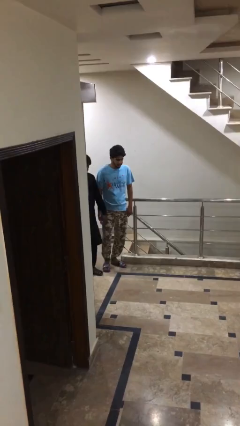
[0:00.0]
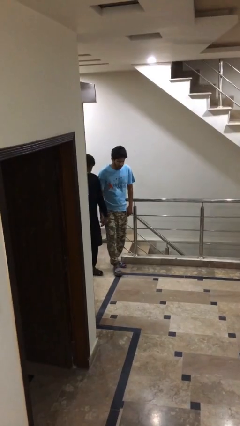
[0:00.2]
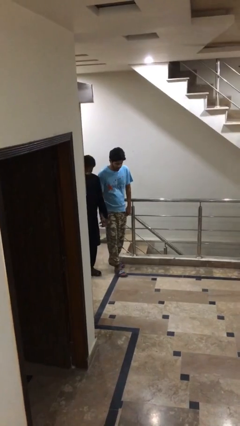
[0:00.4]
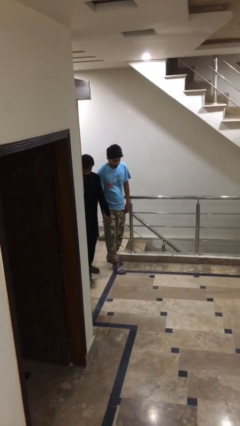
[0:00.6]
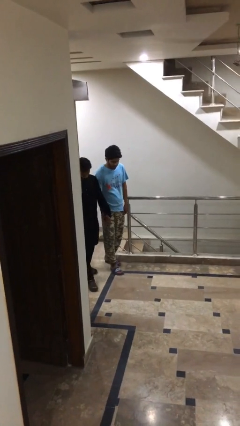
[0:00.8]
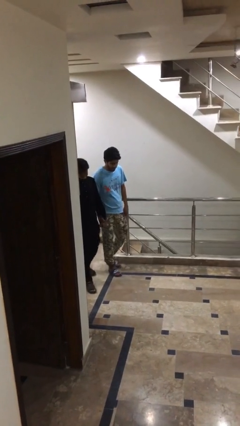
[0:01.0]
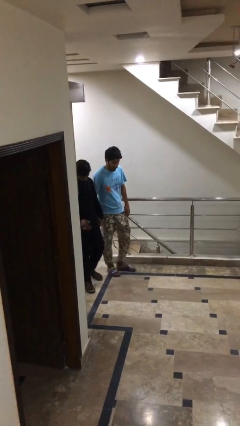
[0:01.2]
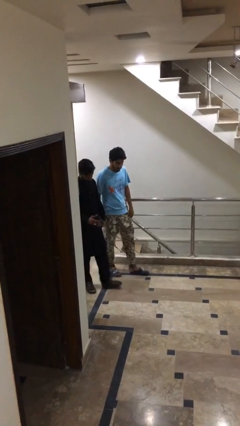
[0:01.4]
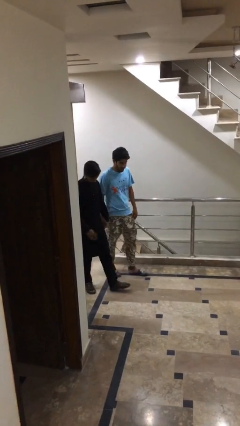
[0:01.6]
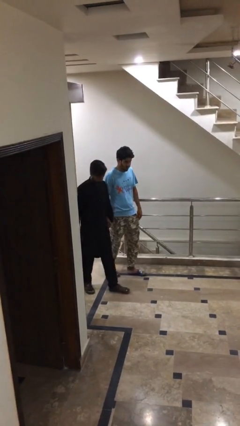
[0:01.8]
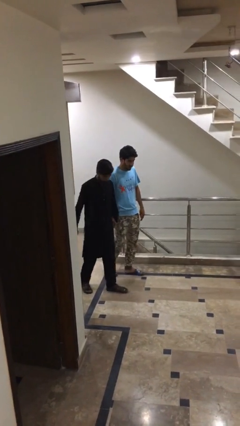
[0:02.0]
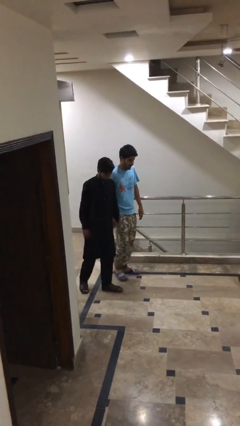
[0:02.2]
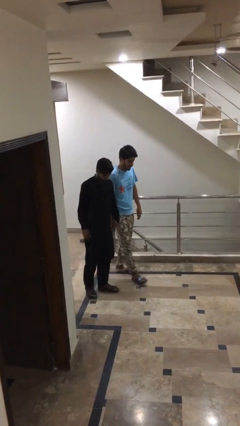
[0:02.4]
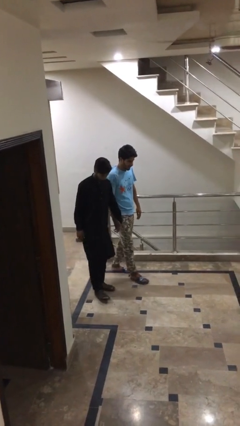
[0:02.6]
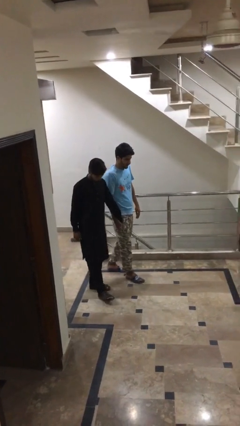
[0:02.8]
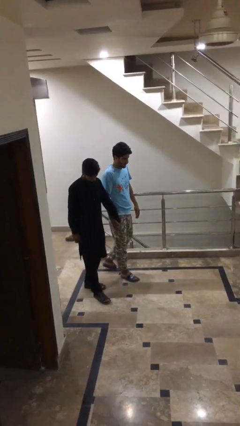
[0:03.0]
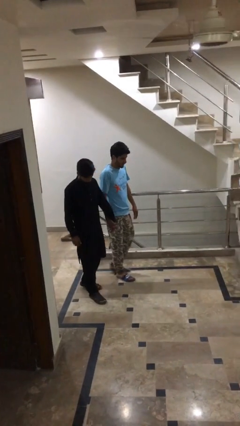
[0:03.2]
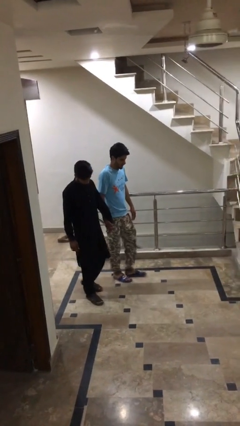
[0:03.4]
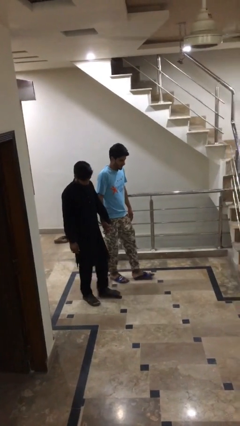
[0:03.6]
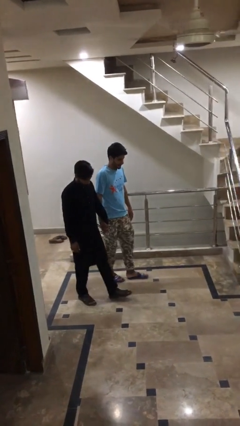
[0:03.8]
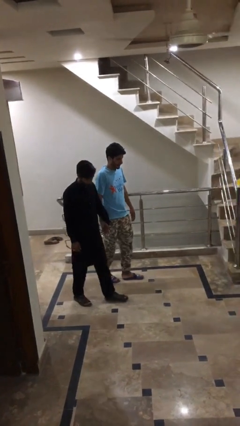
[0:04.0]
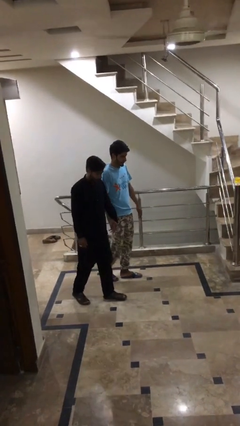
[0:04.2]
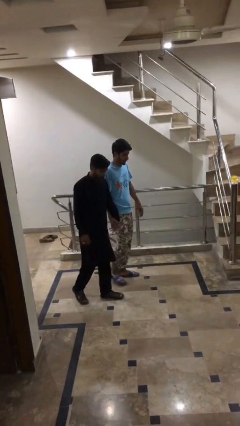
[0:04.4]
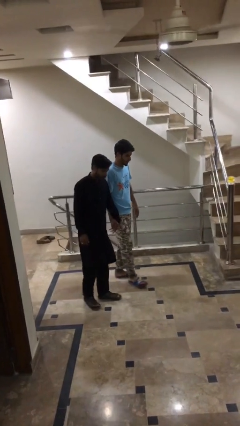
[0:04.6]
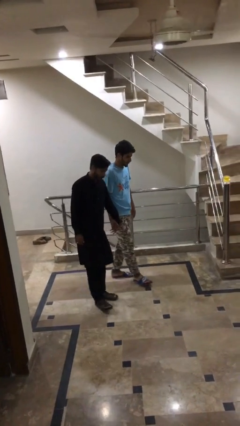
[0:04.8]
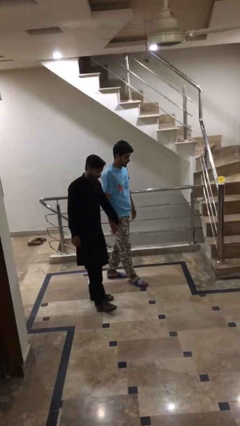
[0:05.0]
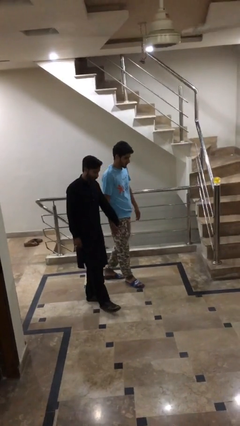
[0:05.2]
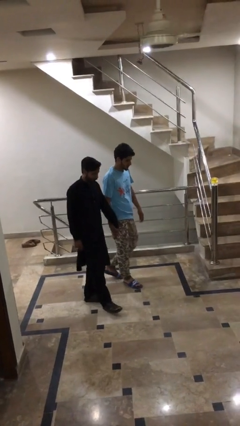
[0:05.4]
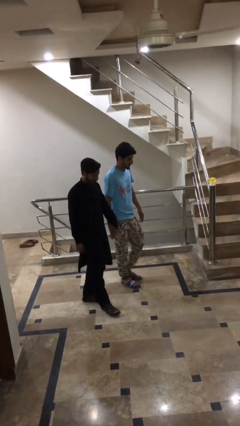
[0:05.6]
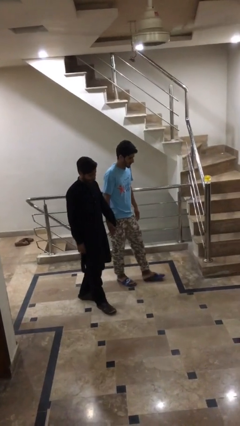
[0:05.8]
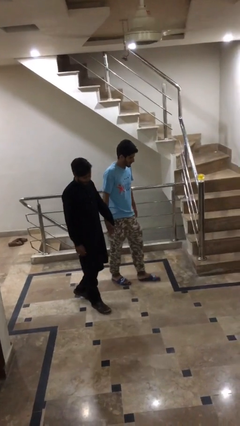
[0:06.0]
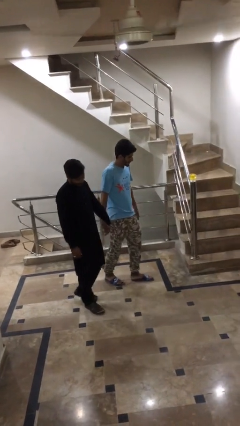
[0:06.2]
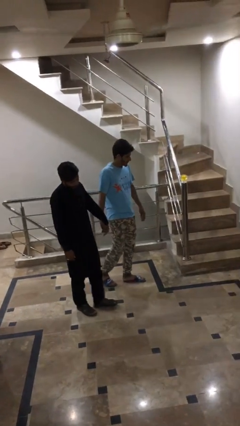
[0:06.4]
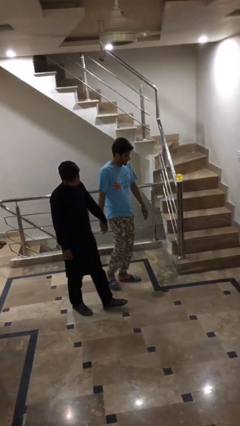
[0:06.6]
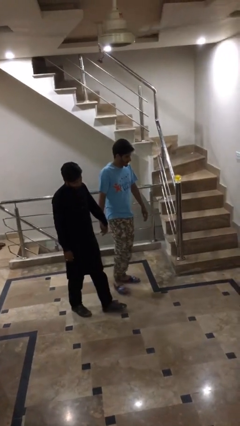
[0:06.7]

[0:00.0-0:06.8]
person holds hand

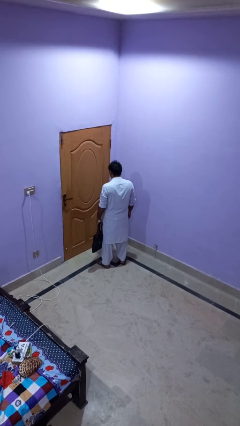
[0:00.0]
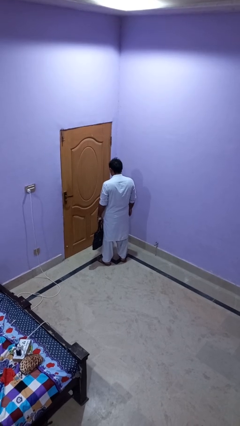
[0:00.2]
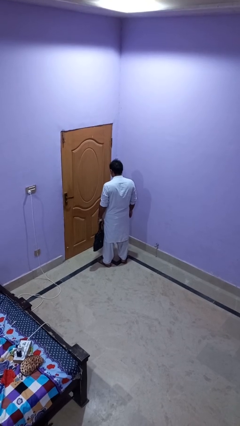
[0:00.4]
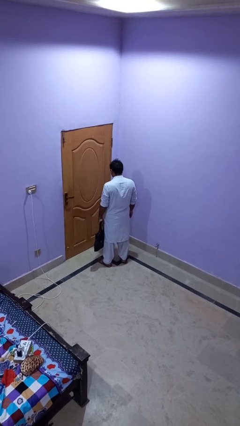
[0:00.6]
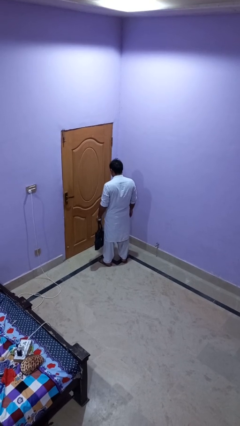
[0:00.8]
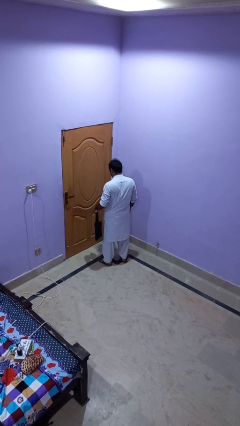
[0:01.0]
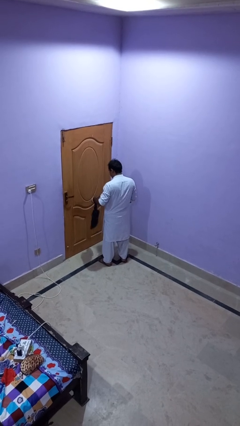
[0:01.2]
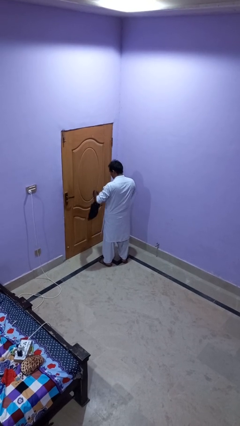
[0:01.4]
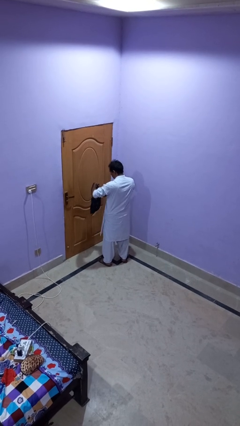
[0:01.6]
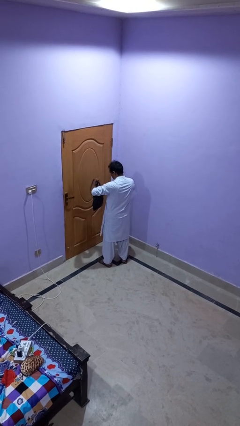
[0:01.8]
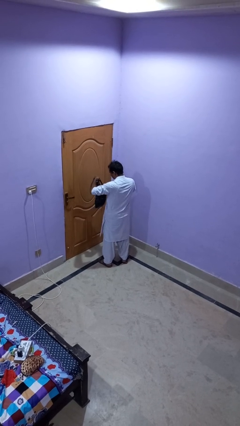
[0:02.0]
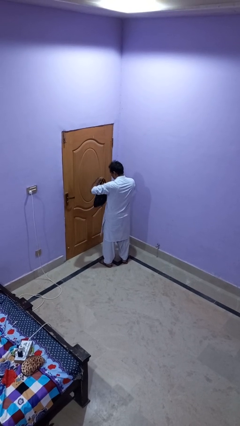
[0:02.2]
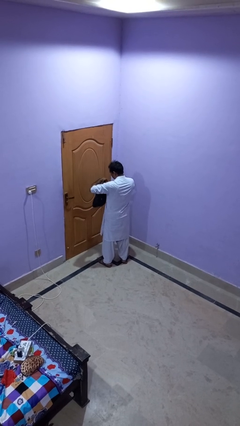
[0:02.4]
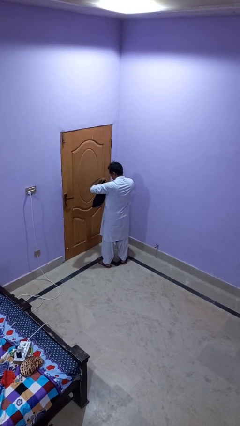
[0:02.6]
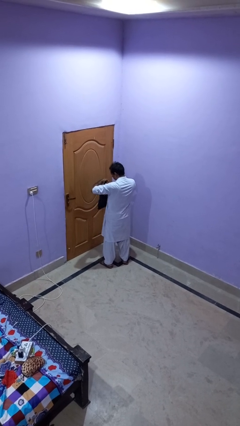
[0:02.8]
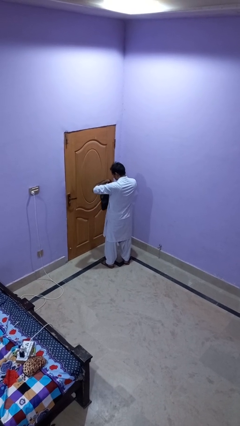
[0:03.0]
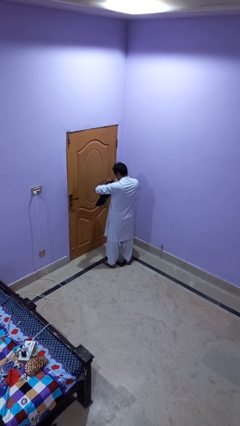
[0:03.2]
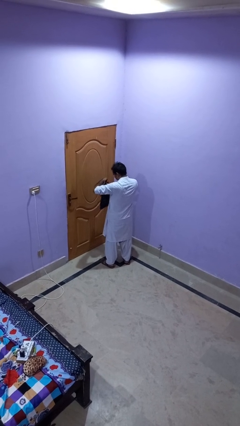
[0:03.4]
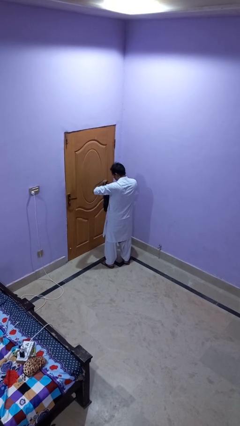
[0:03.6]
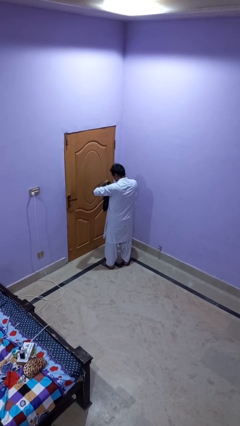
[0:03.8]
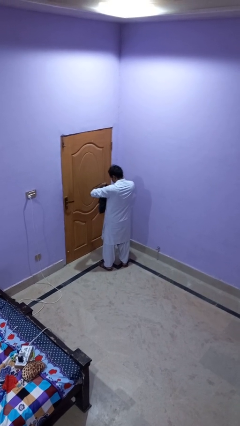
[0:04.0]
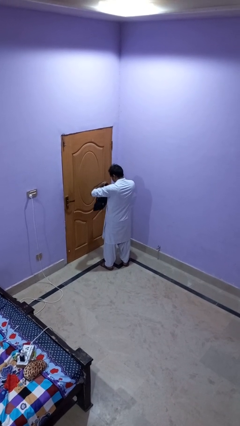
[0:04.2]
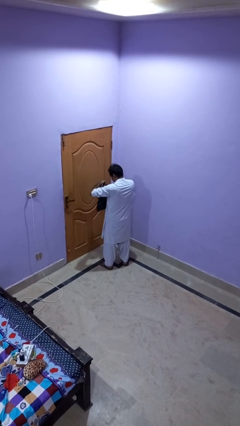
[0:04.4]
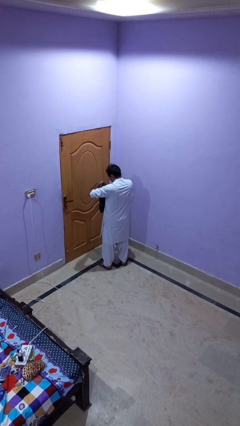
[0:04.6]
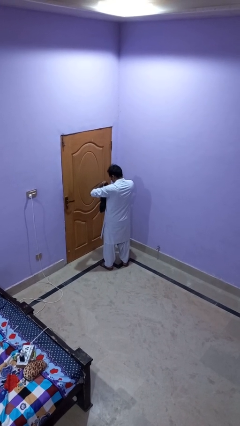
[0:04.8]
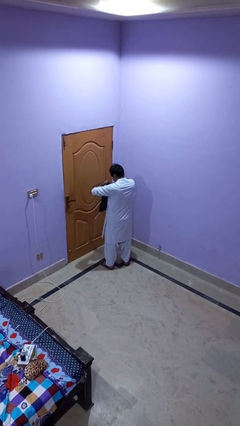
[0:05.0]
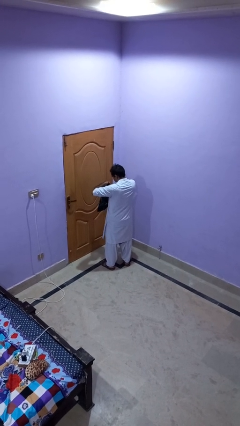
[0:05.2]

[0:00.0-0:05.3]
person searches in purse

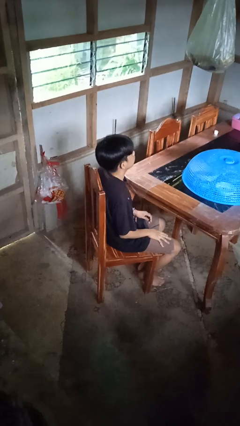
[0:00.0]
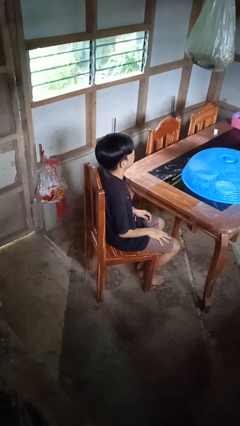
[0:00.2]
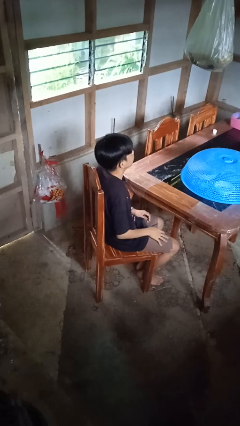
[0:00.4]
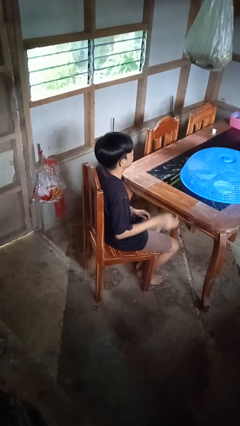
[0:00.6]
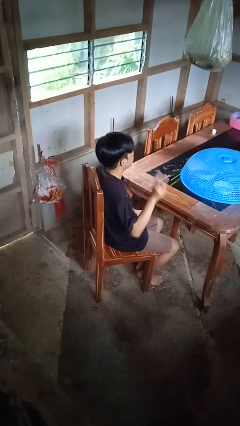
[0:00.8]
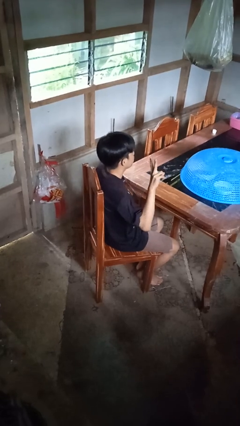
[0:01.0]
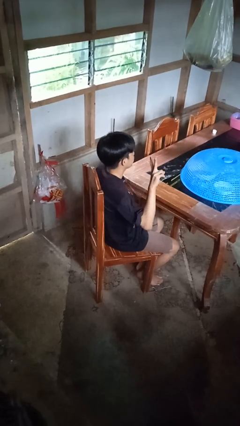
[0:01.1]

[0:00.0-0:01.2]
person gestures peace

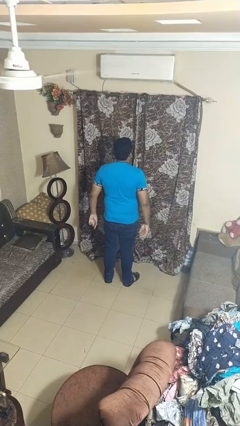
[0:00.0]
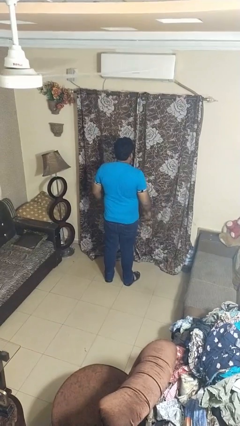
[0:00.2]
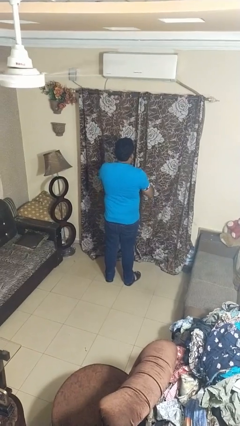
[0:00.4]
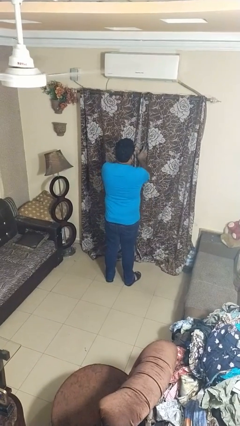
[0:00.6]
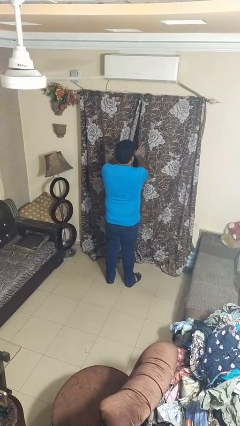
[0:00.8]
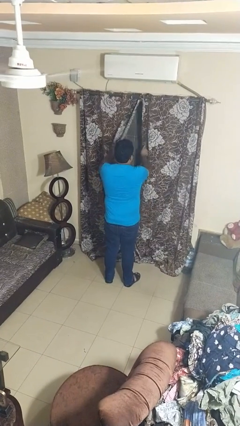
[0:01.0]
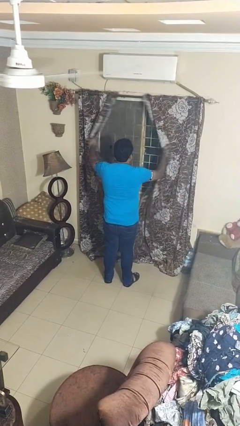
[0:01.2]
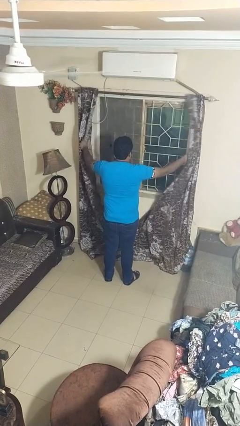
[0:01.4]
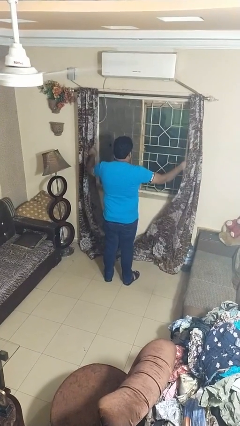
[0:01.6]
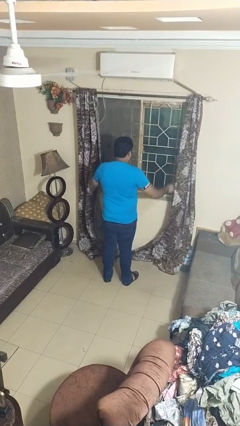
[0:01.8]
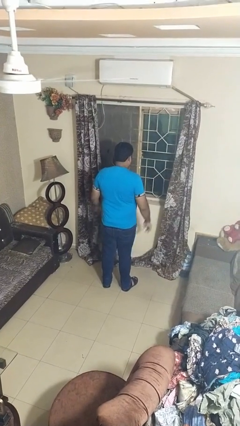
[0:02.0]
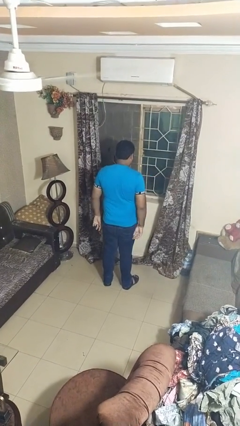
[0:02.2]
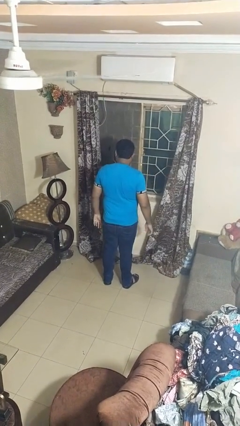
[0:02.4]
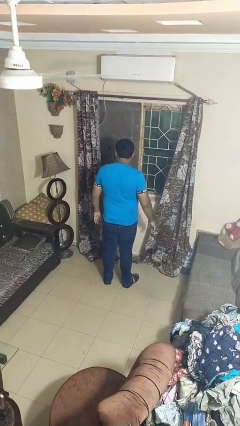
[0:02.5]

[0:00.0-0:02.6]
person opens curtains

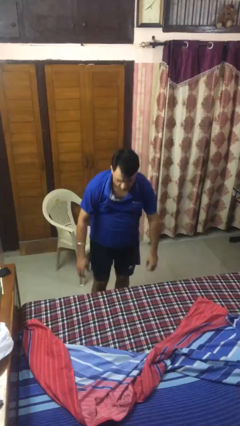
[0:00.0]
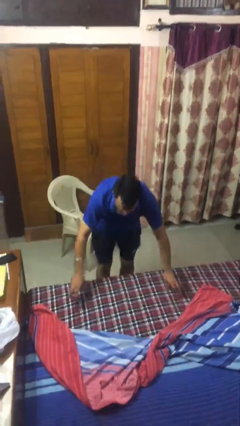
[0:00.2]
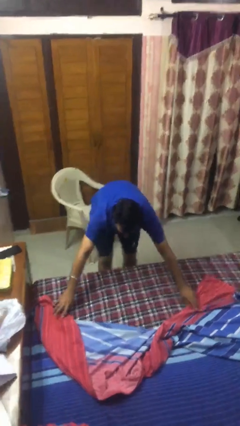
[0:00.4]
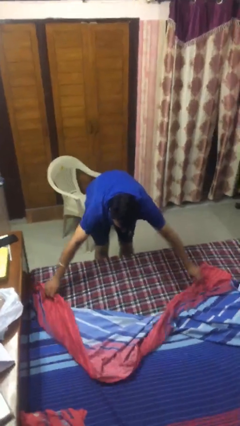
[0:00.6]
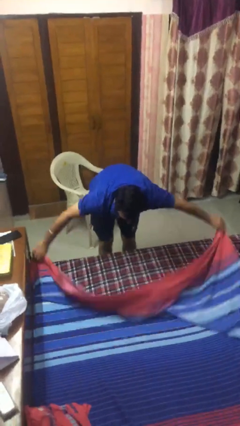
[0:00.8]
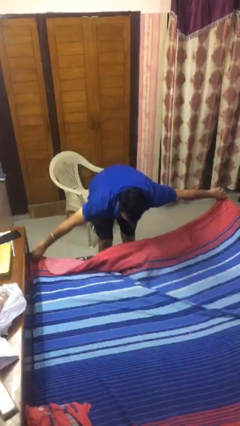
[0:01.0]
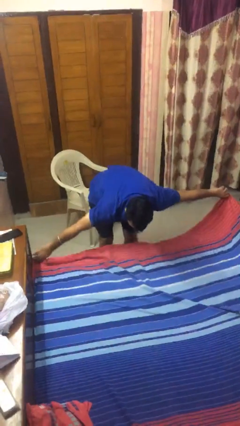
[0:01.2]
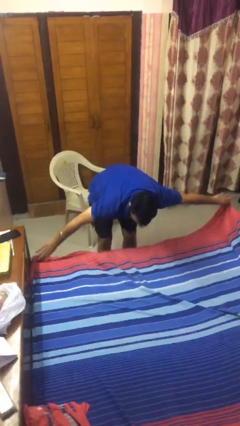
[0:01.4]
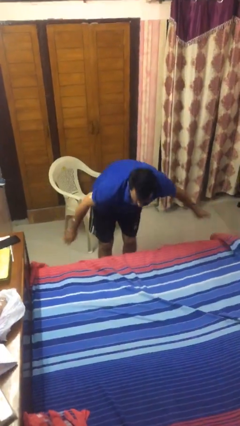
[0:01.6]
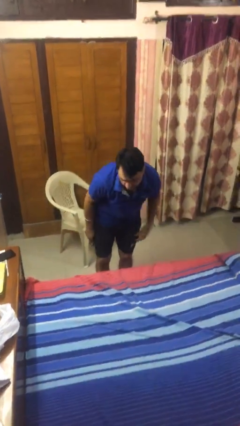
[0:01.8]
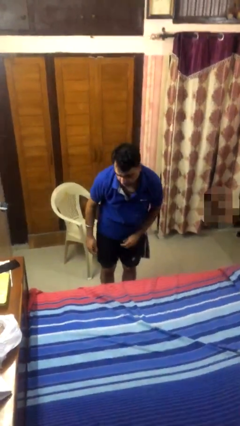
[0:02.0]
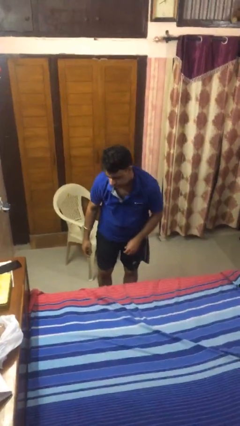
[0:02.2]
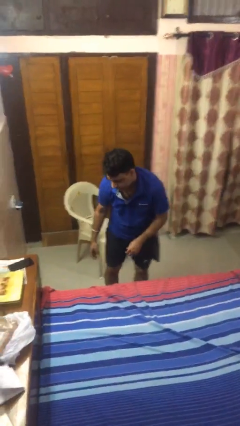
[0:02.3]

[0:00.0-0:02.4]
person makes bed
